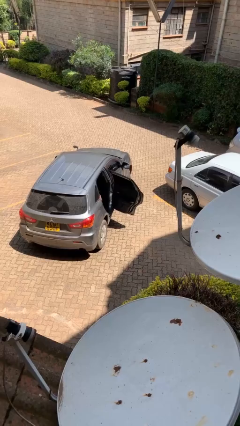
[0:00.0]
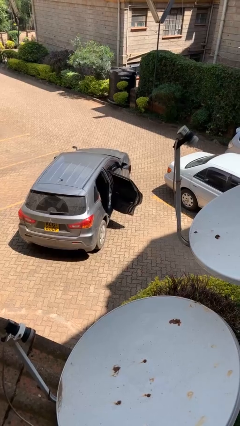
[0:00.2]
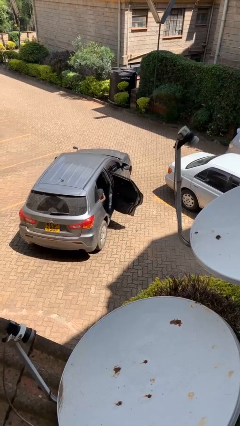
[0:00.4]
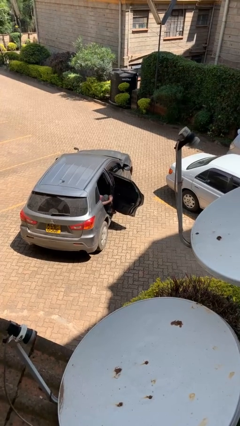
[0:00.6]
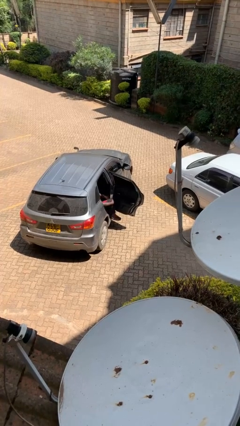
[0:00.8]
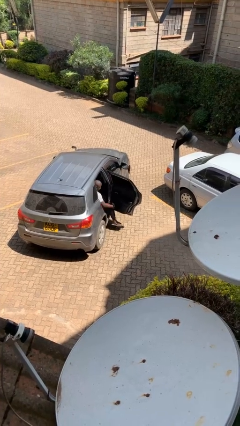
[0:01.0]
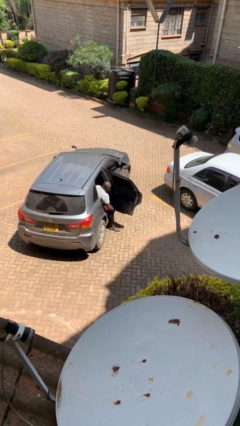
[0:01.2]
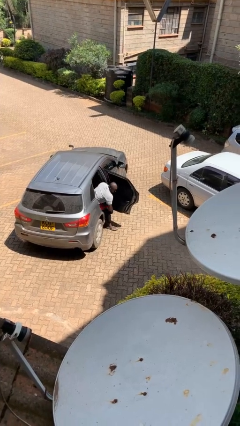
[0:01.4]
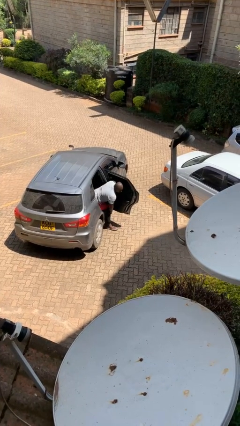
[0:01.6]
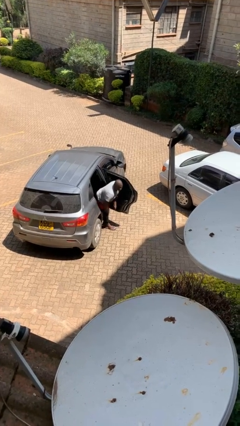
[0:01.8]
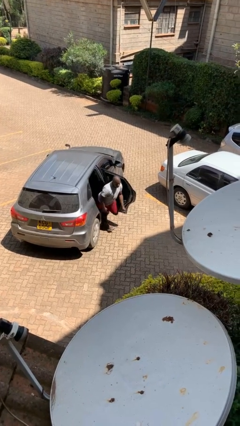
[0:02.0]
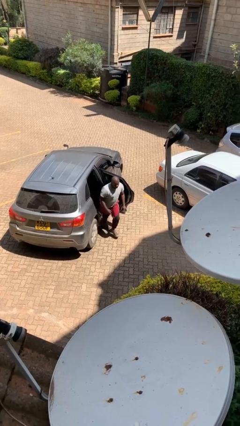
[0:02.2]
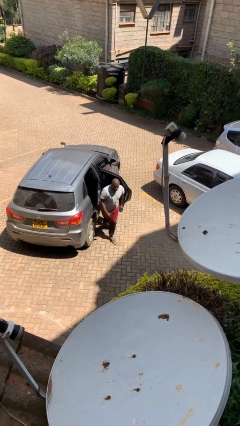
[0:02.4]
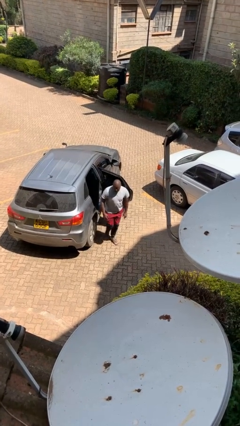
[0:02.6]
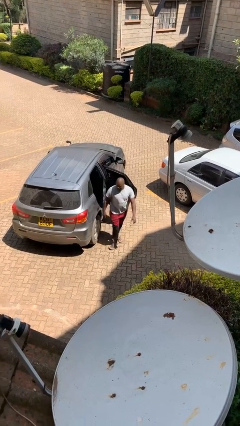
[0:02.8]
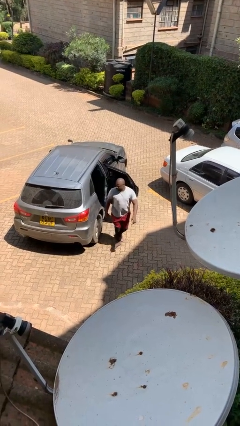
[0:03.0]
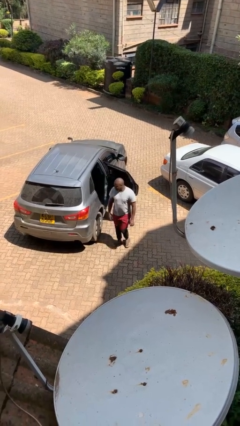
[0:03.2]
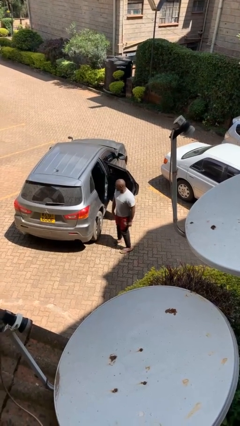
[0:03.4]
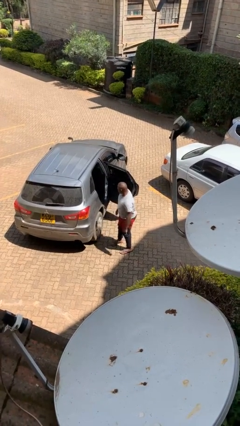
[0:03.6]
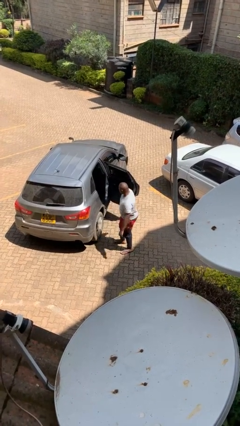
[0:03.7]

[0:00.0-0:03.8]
person exits car

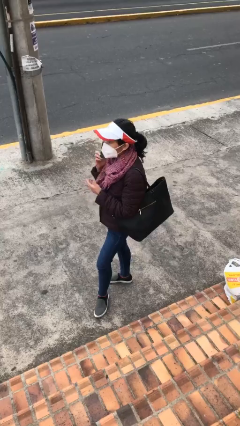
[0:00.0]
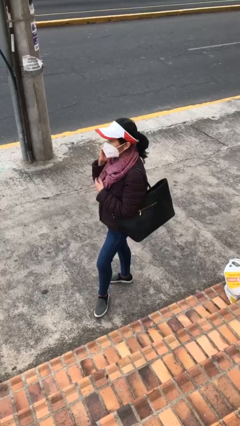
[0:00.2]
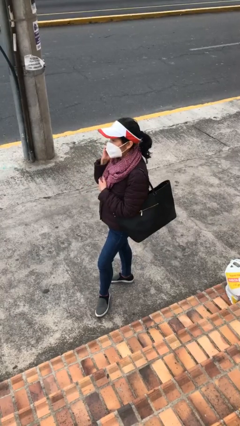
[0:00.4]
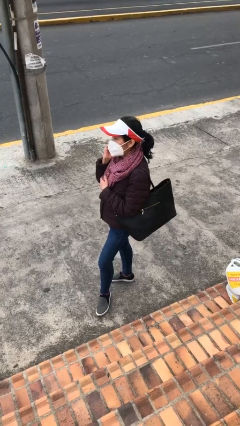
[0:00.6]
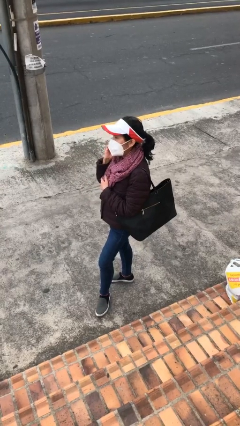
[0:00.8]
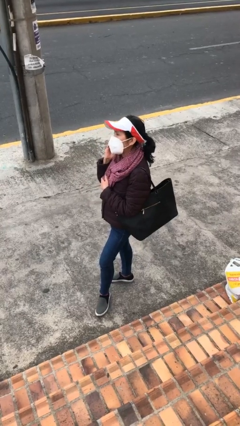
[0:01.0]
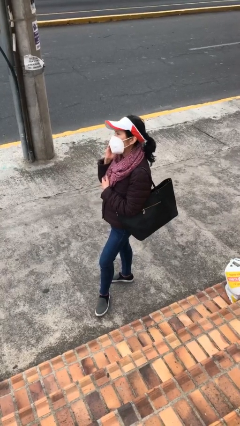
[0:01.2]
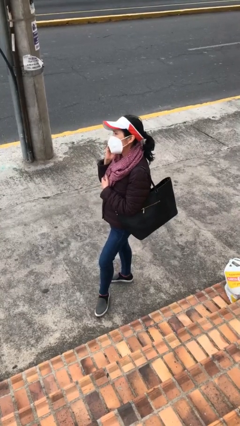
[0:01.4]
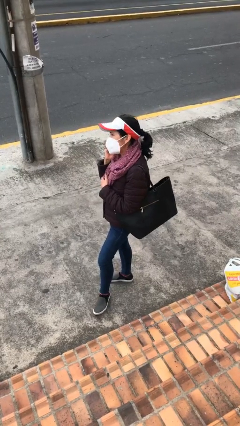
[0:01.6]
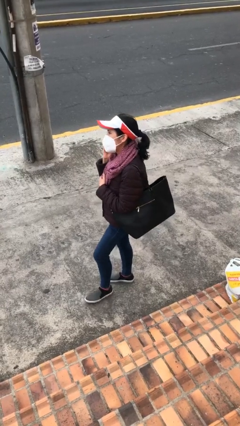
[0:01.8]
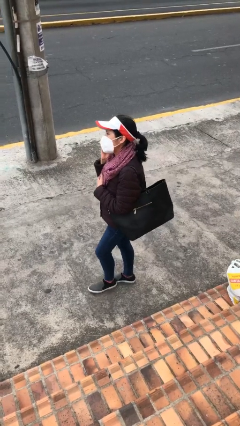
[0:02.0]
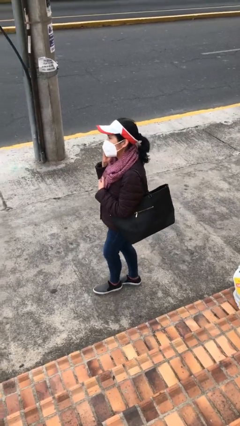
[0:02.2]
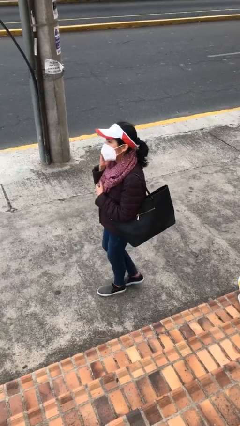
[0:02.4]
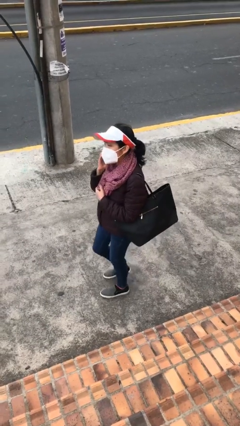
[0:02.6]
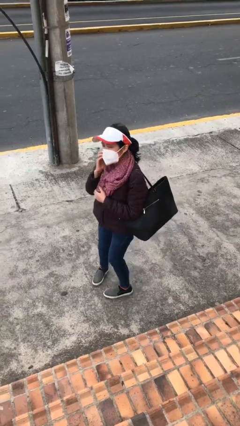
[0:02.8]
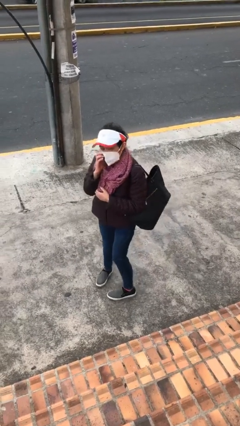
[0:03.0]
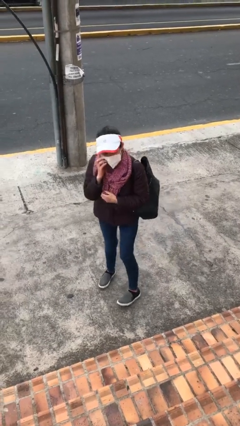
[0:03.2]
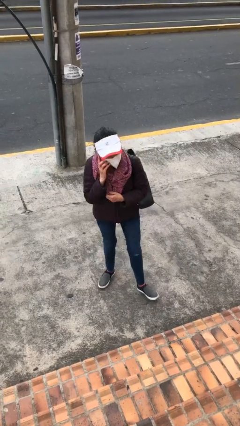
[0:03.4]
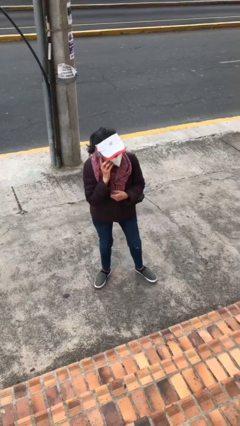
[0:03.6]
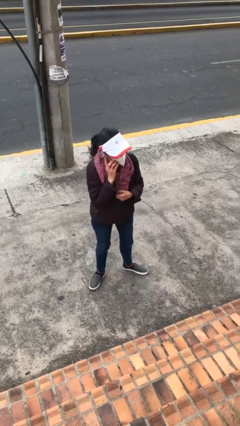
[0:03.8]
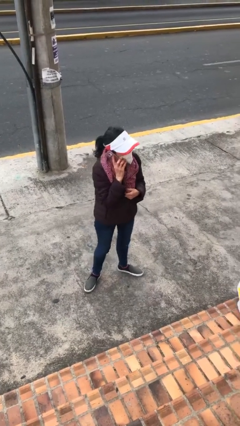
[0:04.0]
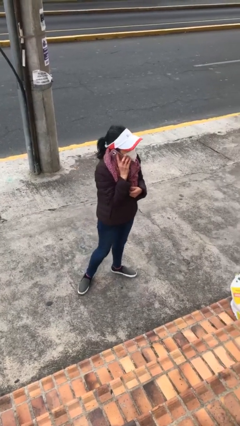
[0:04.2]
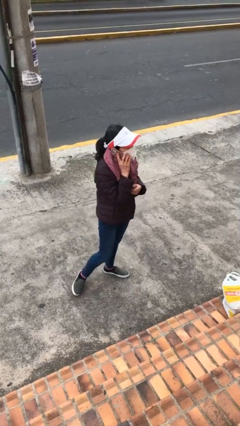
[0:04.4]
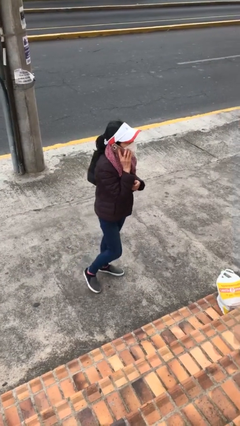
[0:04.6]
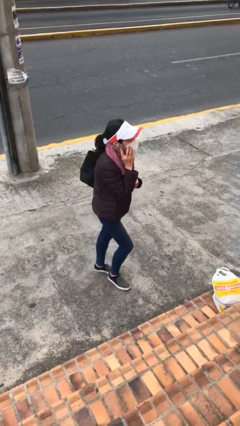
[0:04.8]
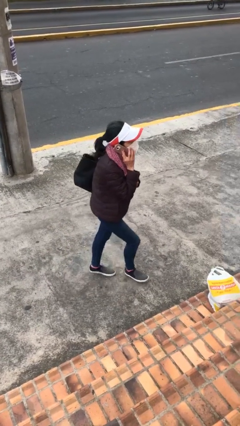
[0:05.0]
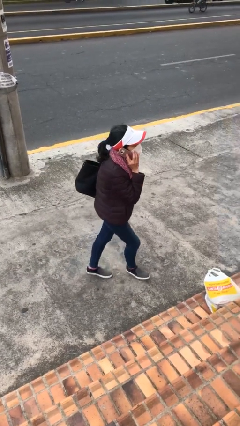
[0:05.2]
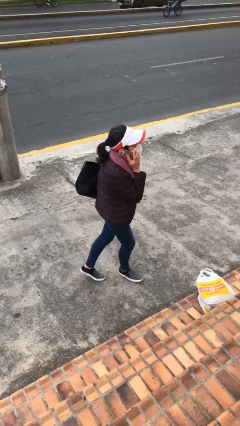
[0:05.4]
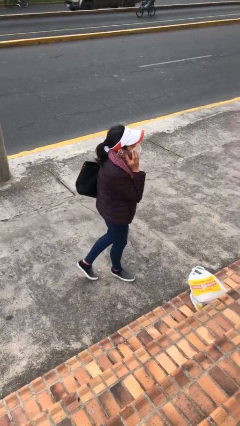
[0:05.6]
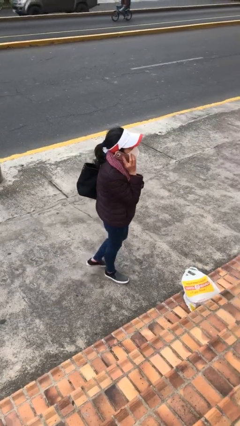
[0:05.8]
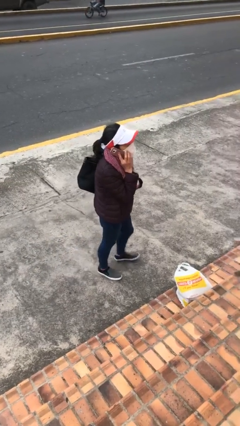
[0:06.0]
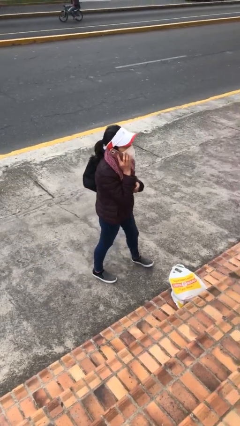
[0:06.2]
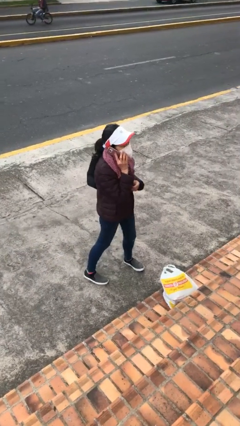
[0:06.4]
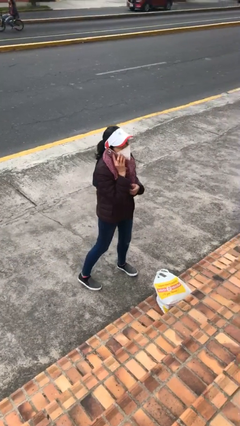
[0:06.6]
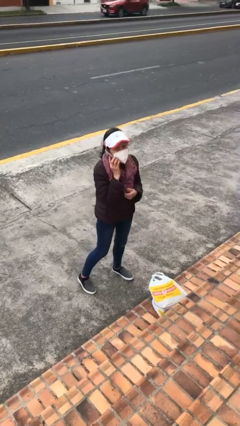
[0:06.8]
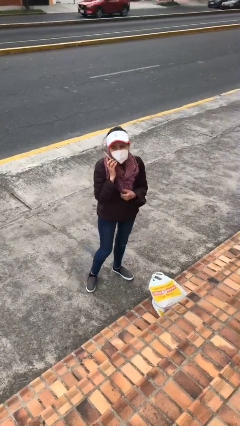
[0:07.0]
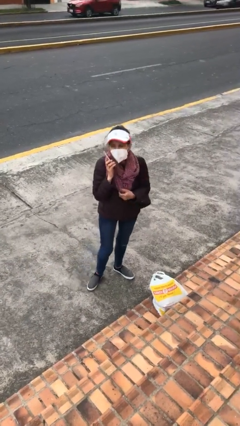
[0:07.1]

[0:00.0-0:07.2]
person talks on phone

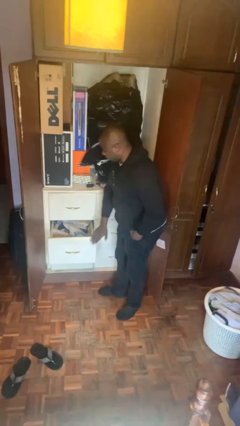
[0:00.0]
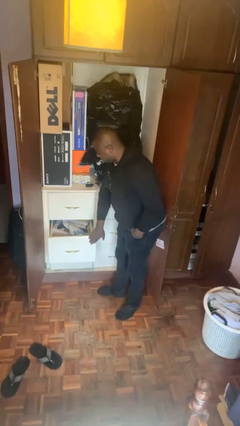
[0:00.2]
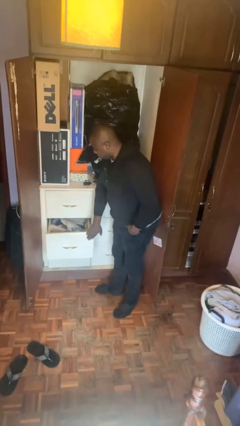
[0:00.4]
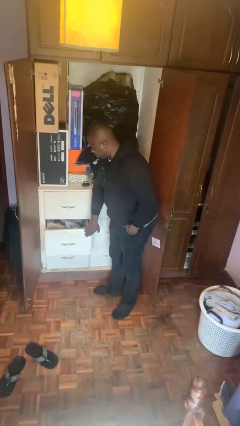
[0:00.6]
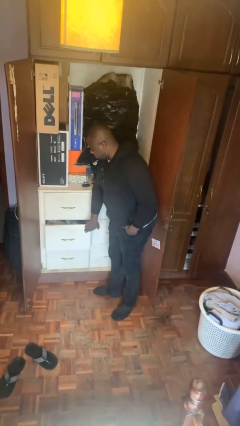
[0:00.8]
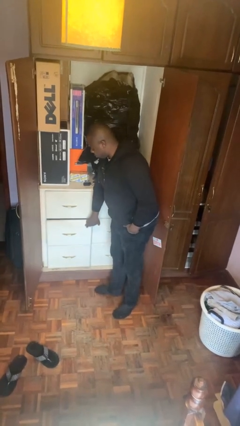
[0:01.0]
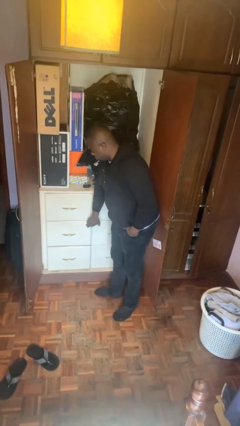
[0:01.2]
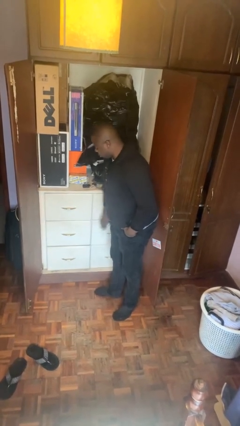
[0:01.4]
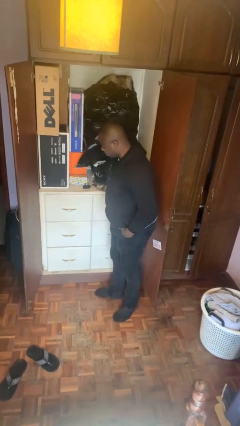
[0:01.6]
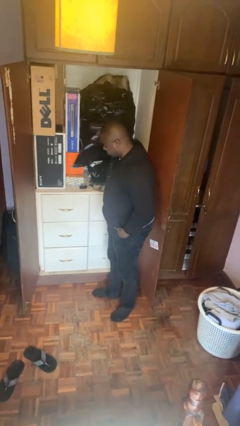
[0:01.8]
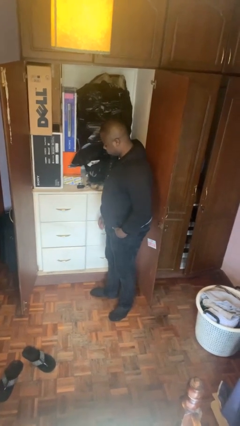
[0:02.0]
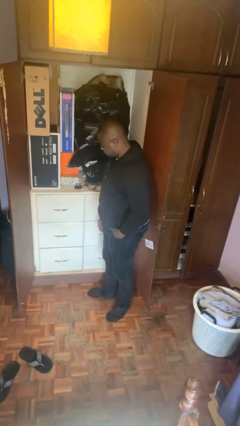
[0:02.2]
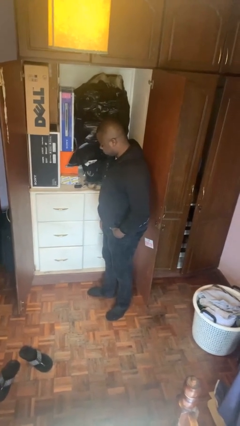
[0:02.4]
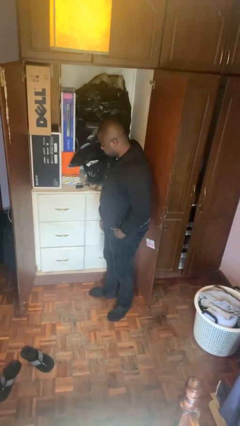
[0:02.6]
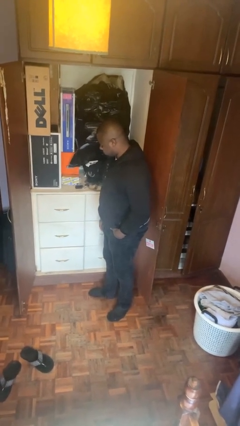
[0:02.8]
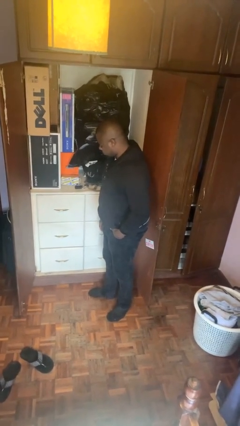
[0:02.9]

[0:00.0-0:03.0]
person closes dresser drawer

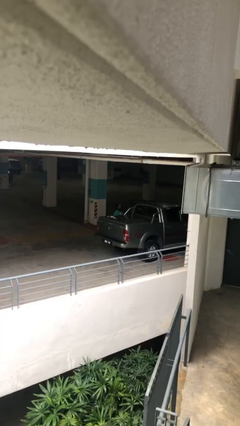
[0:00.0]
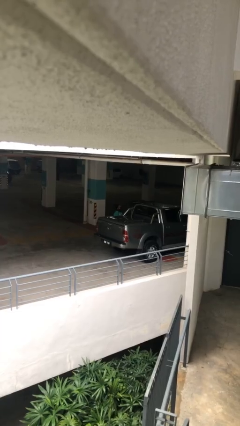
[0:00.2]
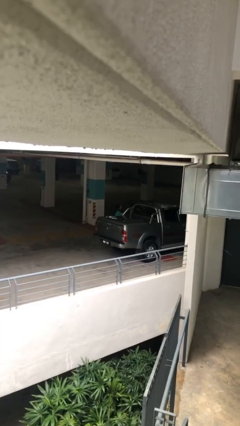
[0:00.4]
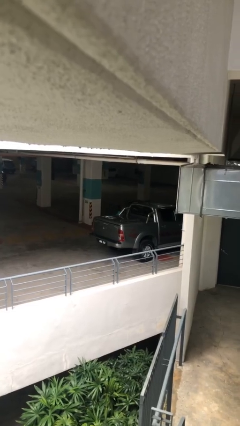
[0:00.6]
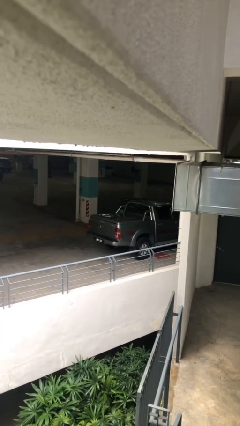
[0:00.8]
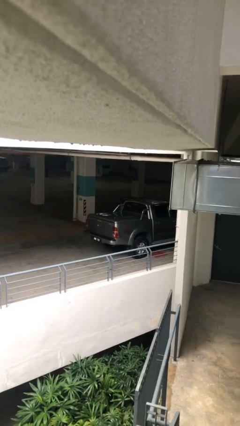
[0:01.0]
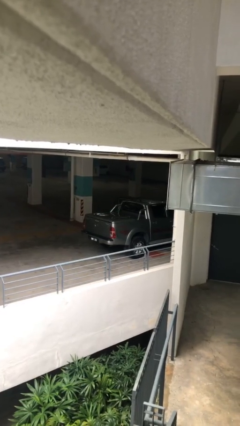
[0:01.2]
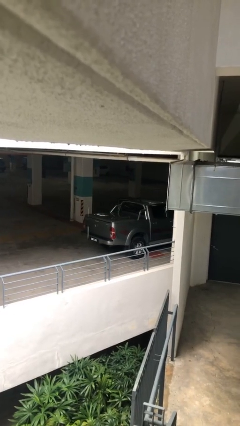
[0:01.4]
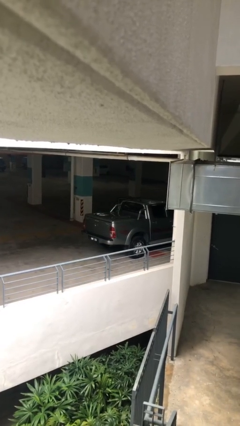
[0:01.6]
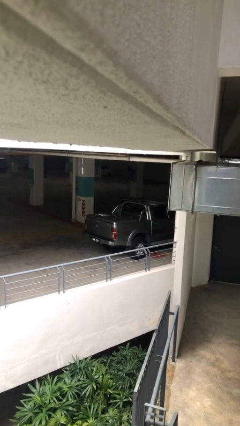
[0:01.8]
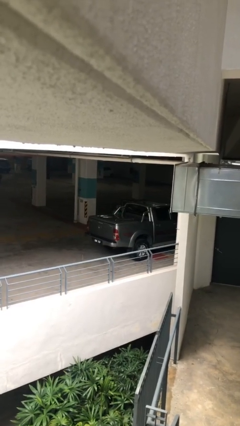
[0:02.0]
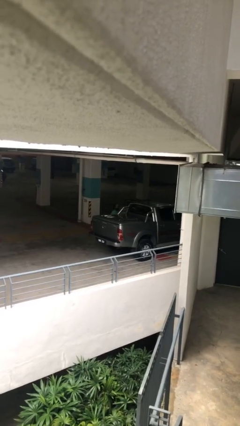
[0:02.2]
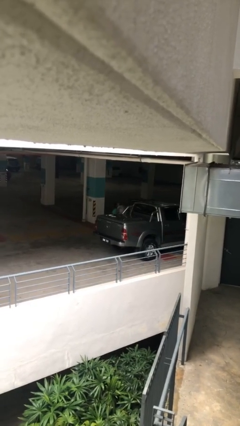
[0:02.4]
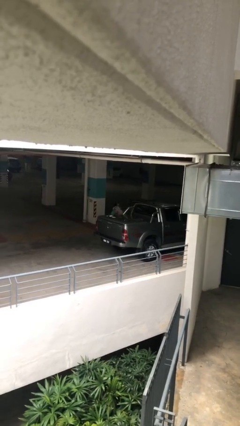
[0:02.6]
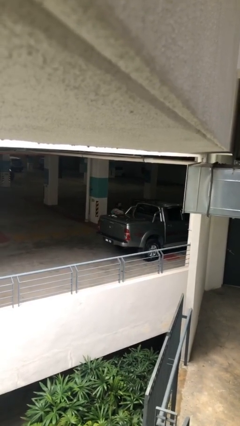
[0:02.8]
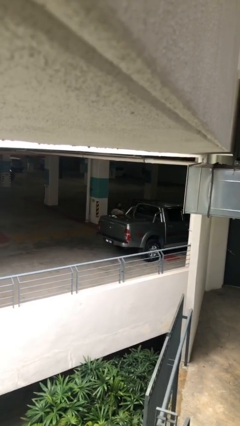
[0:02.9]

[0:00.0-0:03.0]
person unloads car

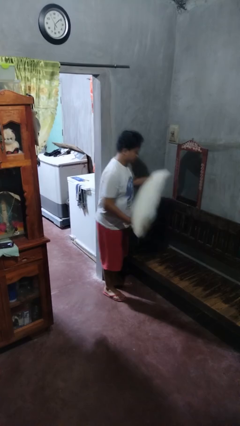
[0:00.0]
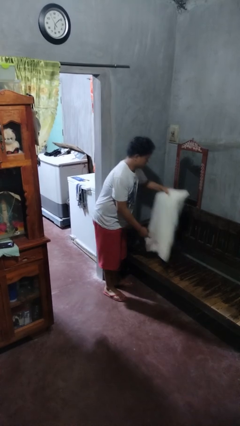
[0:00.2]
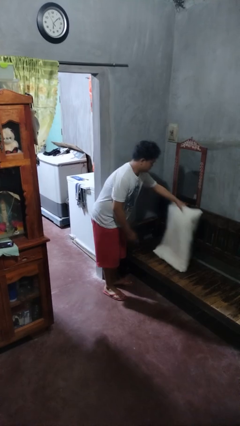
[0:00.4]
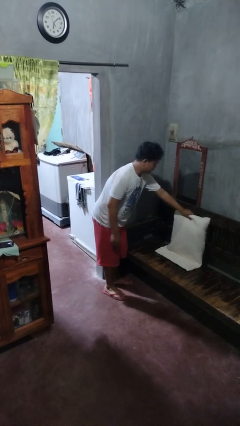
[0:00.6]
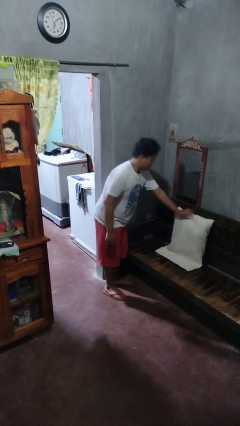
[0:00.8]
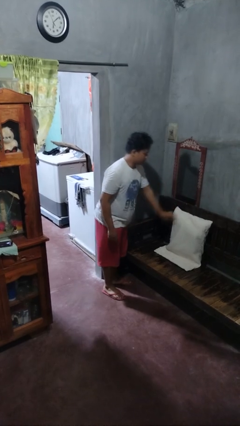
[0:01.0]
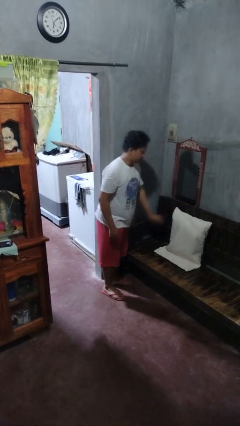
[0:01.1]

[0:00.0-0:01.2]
person puts down object on couch
